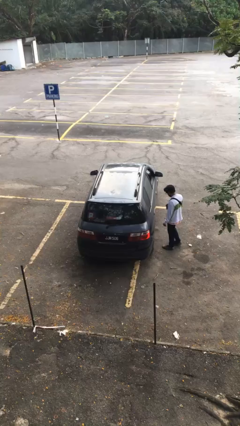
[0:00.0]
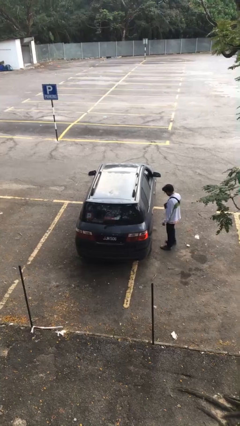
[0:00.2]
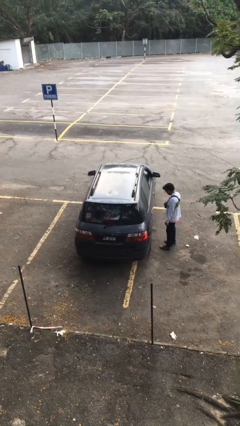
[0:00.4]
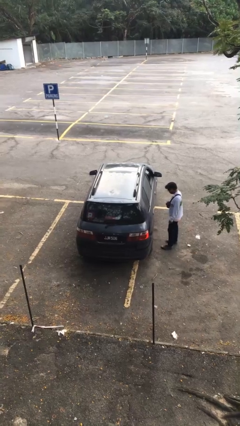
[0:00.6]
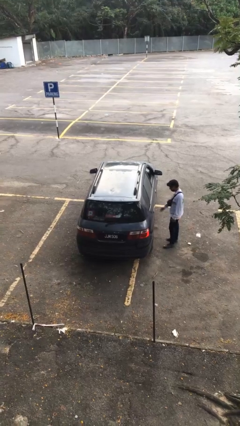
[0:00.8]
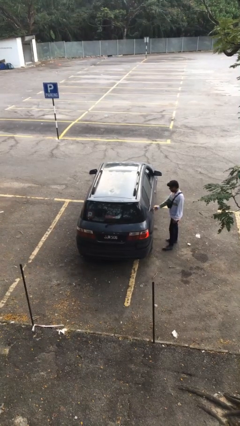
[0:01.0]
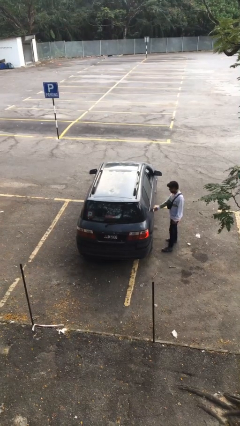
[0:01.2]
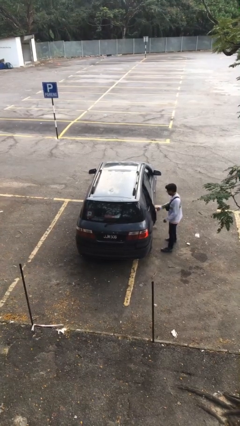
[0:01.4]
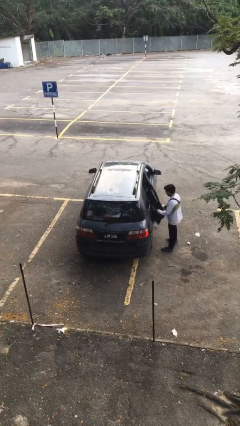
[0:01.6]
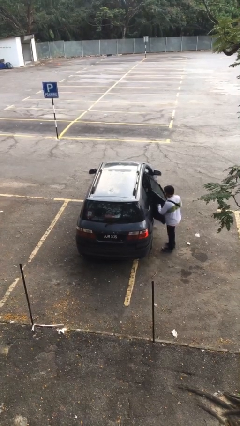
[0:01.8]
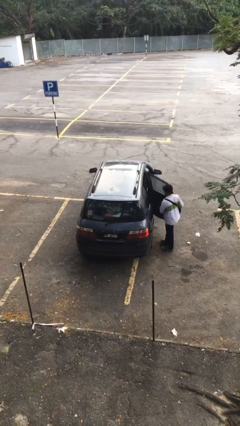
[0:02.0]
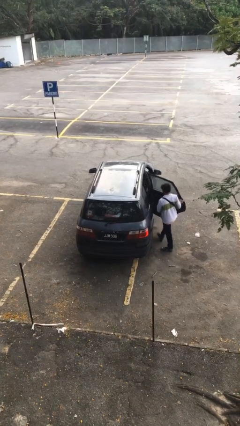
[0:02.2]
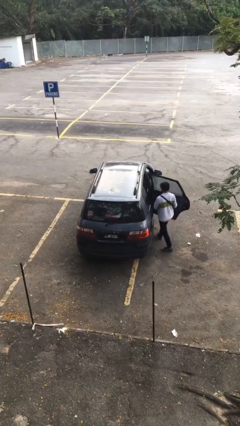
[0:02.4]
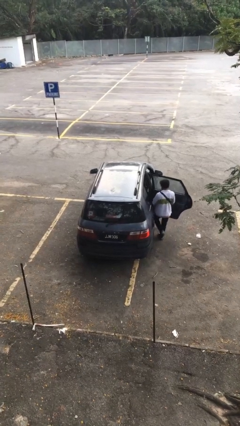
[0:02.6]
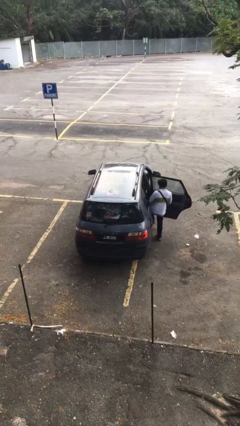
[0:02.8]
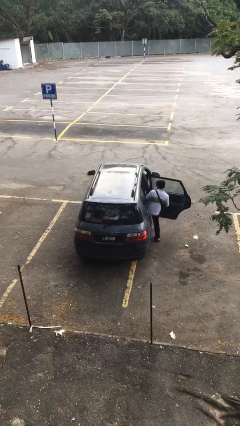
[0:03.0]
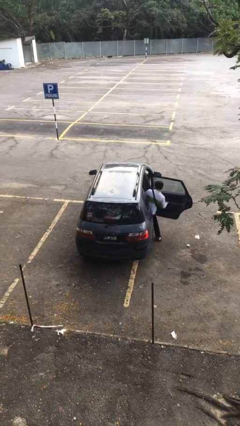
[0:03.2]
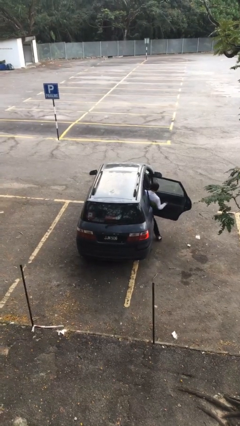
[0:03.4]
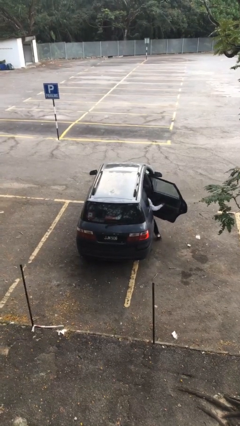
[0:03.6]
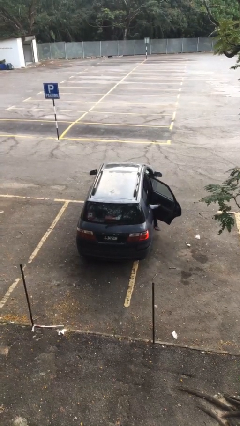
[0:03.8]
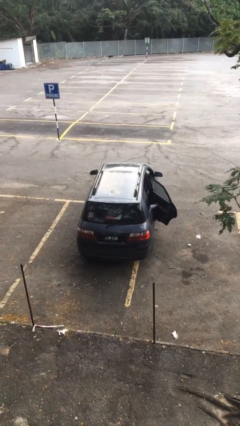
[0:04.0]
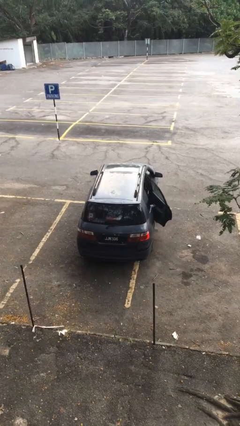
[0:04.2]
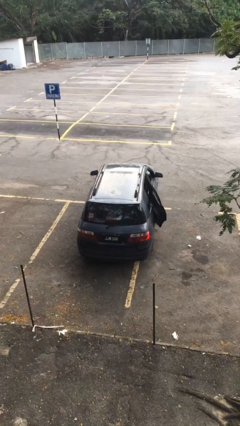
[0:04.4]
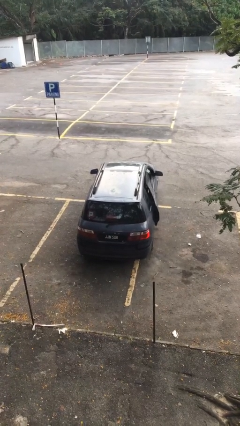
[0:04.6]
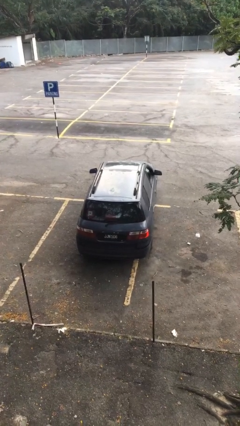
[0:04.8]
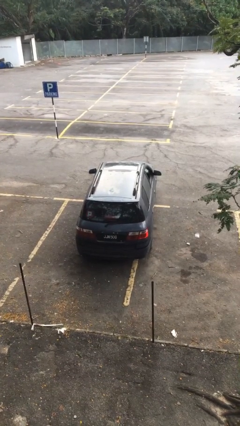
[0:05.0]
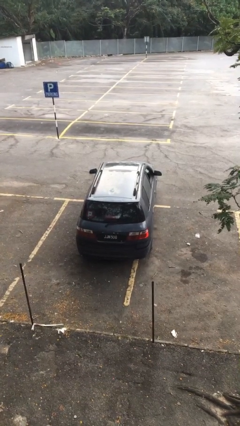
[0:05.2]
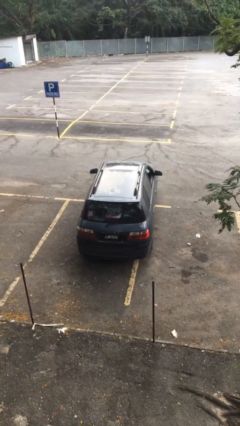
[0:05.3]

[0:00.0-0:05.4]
car picks up person

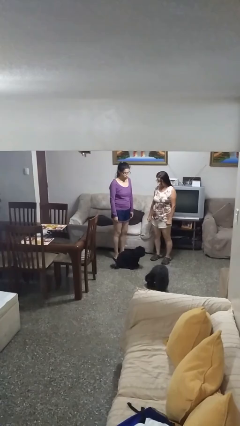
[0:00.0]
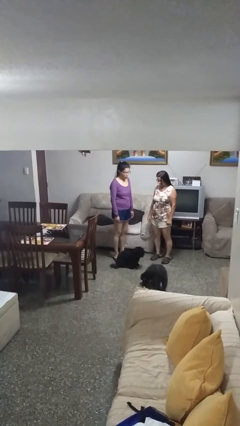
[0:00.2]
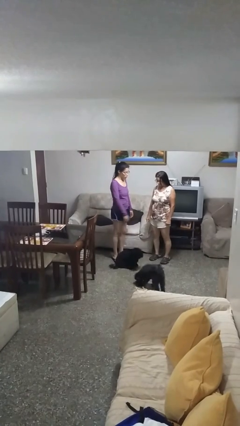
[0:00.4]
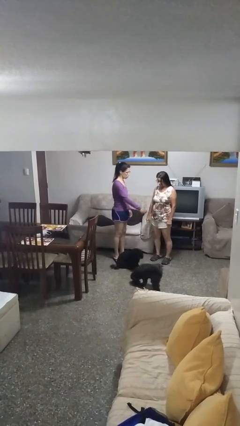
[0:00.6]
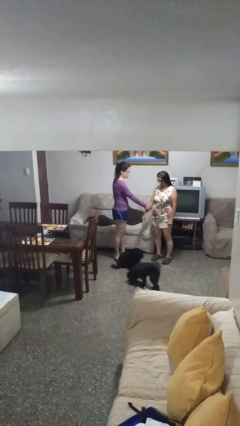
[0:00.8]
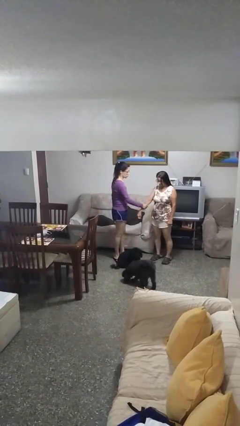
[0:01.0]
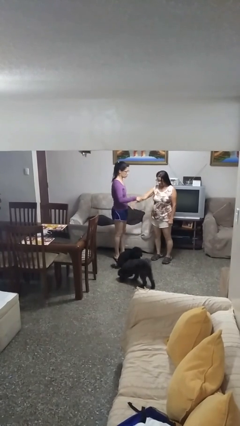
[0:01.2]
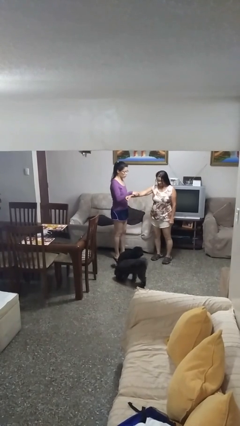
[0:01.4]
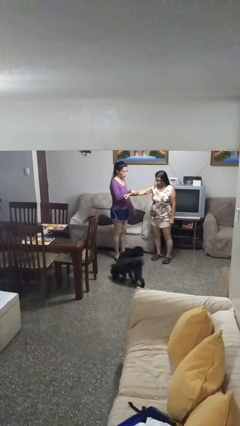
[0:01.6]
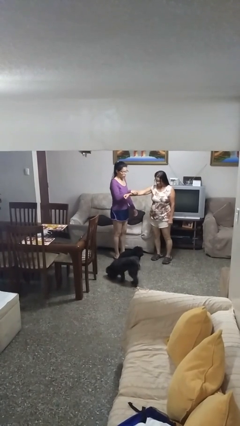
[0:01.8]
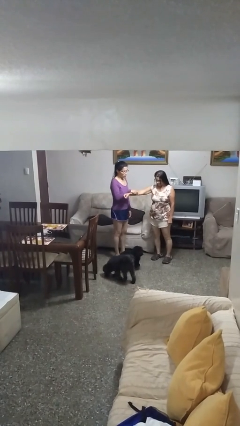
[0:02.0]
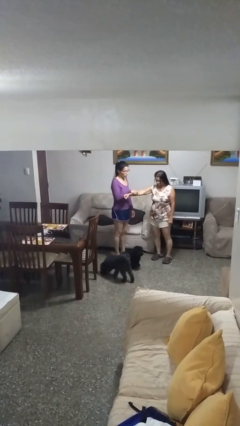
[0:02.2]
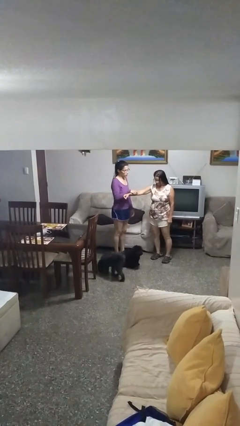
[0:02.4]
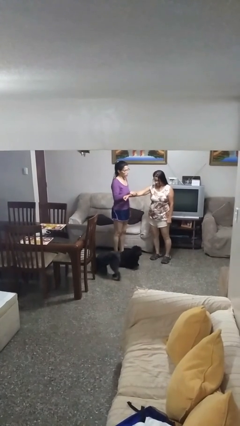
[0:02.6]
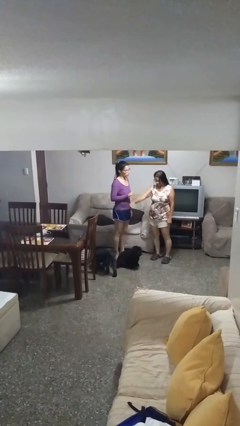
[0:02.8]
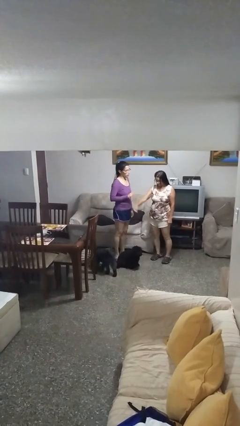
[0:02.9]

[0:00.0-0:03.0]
person grabs person by forearm

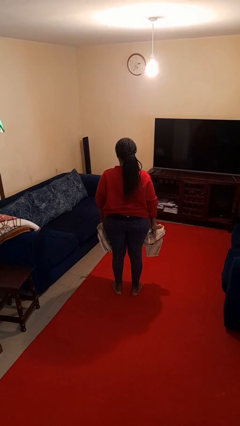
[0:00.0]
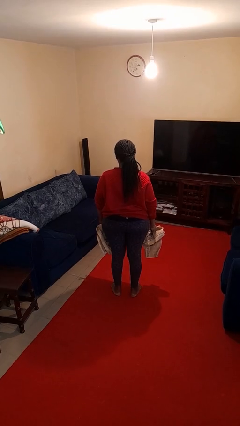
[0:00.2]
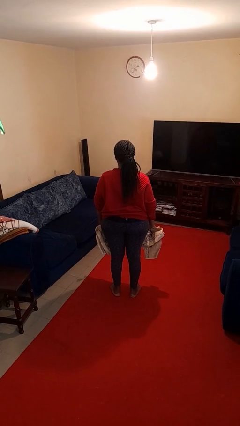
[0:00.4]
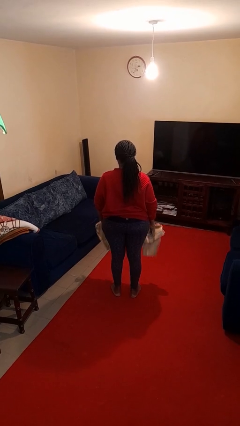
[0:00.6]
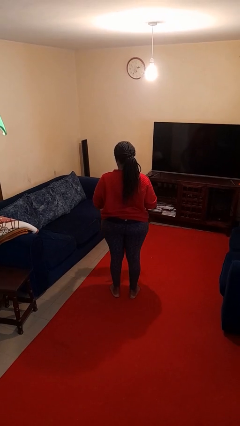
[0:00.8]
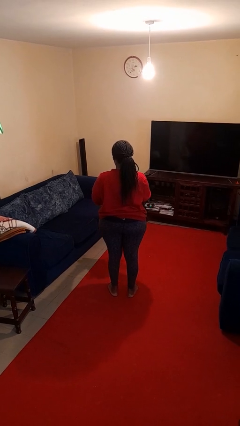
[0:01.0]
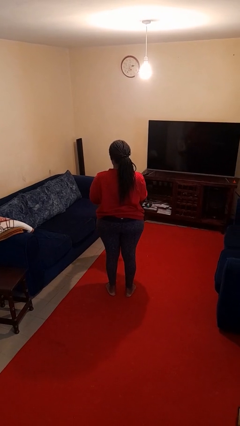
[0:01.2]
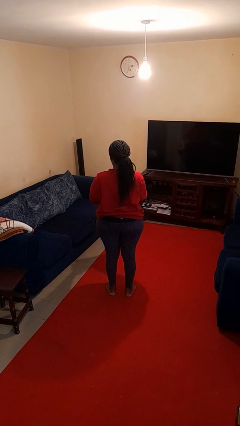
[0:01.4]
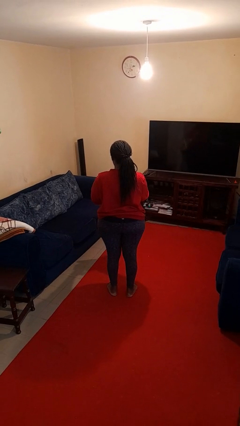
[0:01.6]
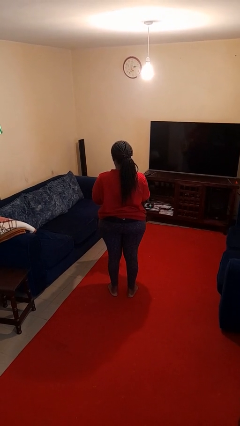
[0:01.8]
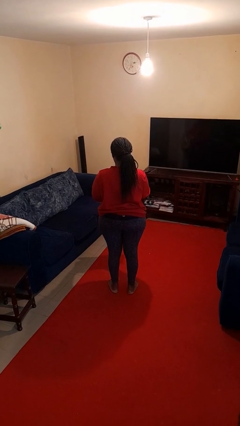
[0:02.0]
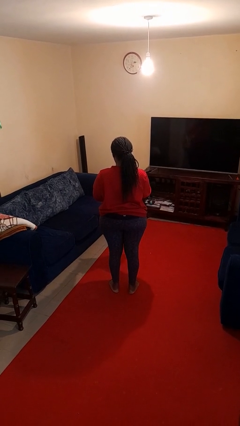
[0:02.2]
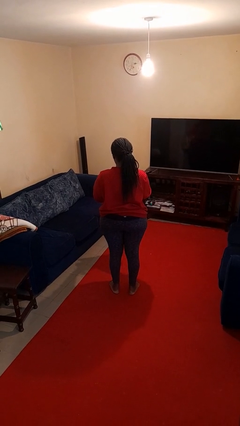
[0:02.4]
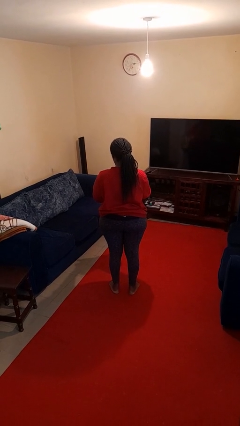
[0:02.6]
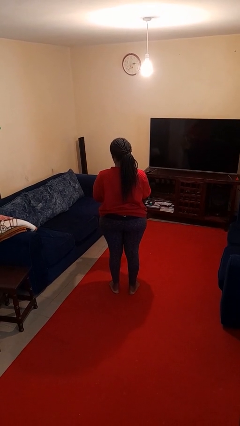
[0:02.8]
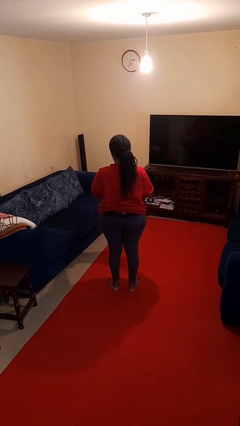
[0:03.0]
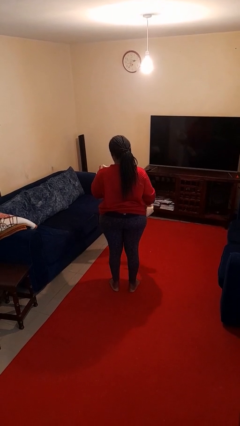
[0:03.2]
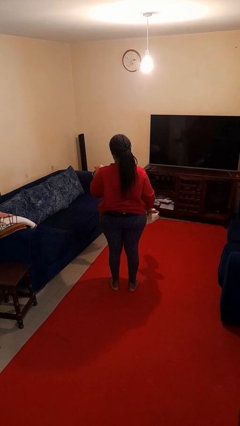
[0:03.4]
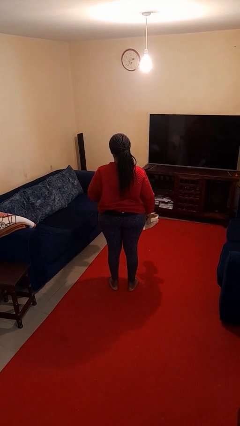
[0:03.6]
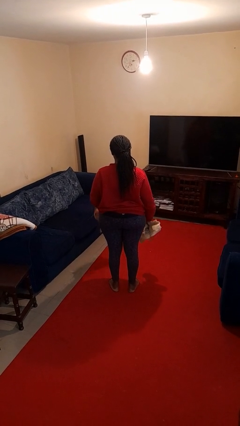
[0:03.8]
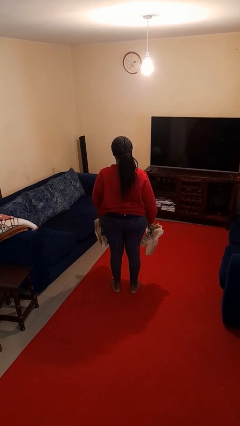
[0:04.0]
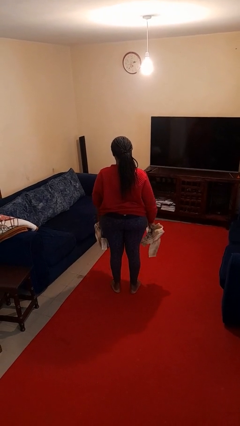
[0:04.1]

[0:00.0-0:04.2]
person tears paper

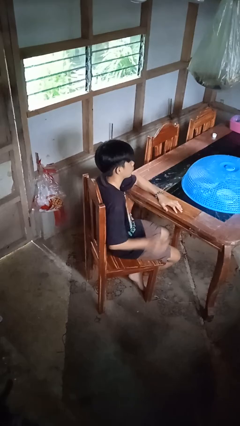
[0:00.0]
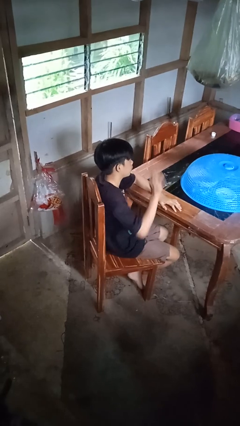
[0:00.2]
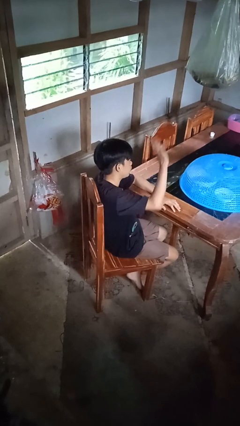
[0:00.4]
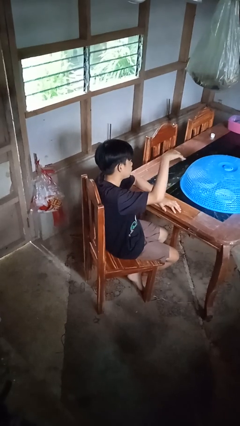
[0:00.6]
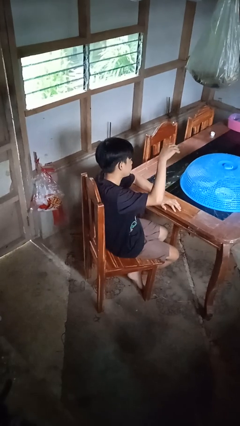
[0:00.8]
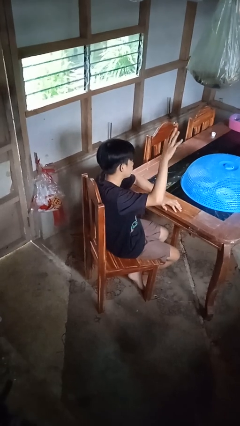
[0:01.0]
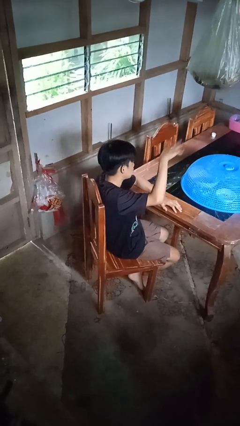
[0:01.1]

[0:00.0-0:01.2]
person gestures come here

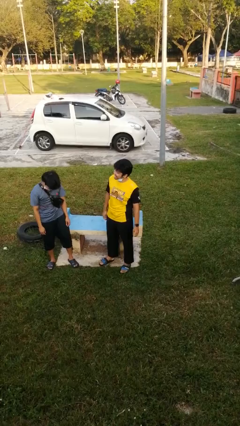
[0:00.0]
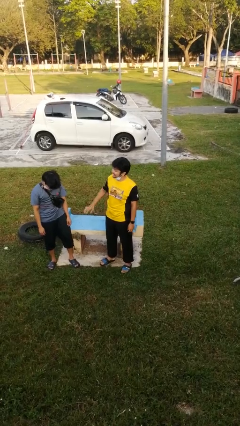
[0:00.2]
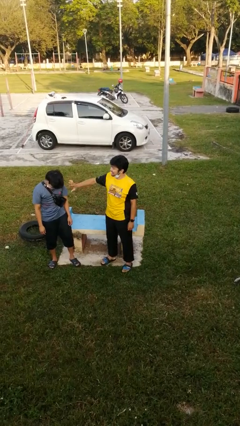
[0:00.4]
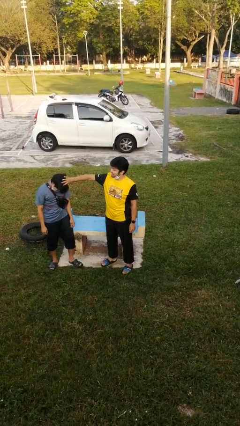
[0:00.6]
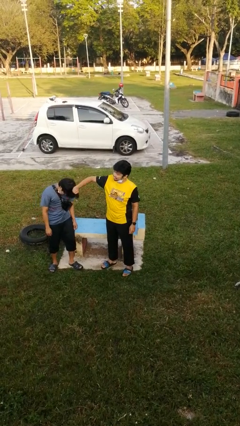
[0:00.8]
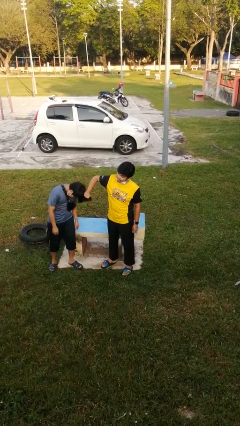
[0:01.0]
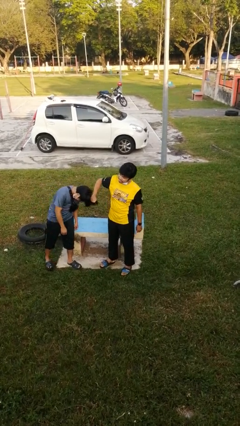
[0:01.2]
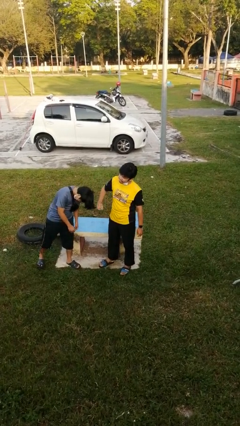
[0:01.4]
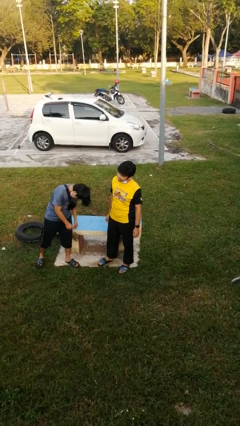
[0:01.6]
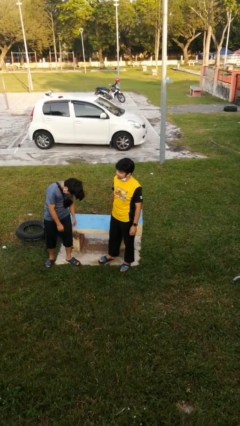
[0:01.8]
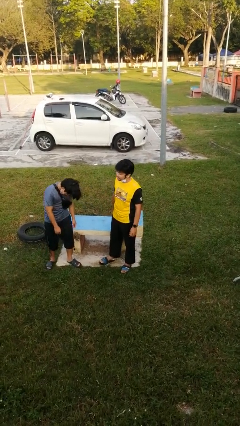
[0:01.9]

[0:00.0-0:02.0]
person grabs person by hair

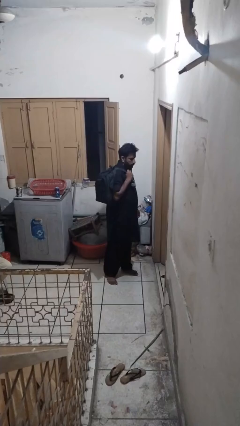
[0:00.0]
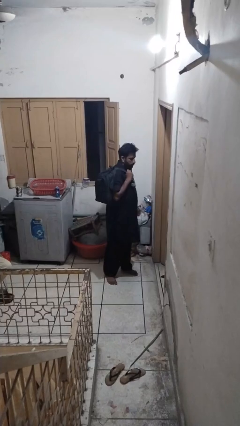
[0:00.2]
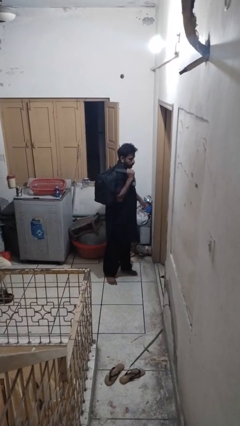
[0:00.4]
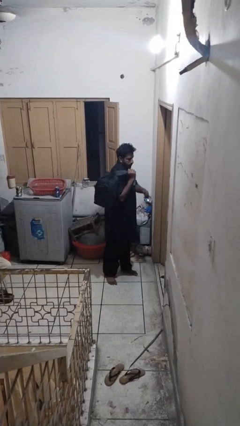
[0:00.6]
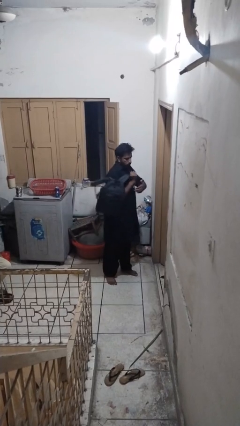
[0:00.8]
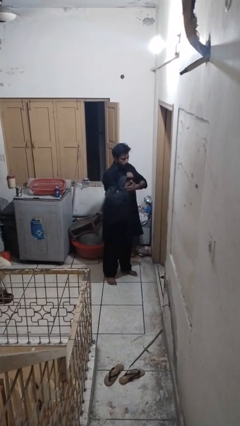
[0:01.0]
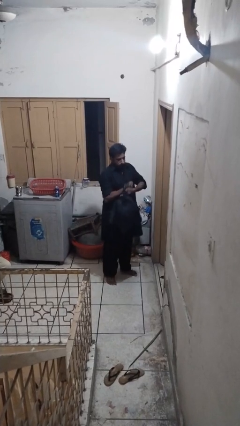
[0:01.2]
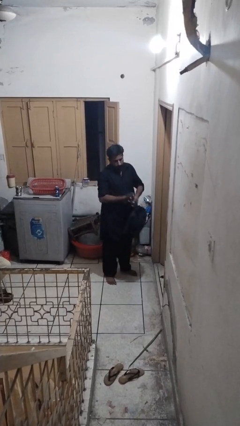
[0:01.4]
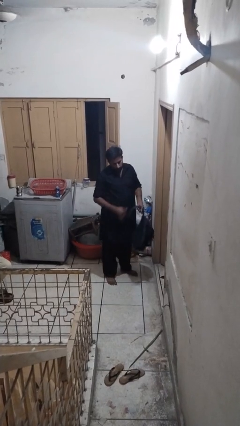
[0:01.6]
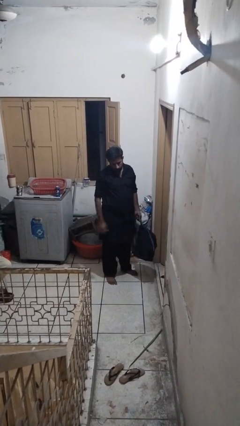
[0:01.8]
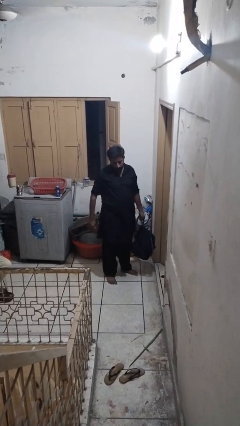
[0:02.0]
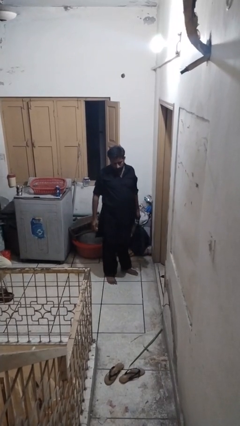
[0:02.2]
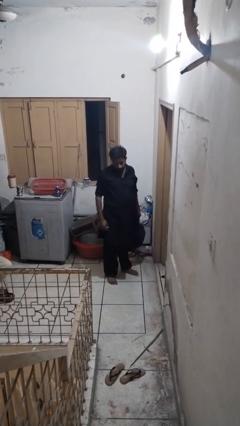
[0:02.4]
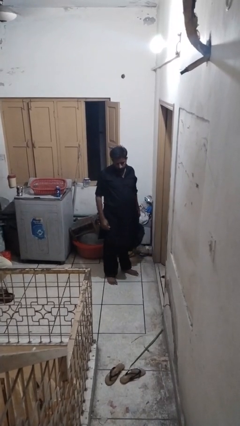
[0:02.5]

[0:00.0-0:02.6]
person takes off backpack
